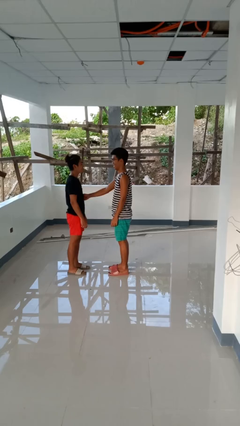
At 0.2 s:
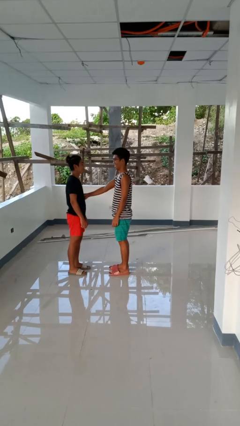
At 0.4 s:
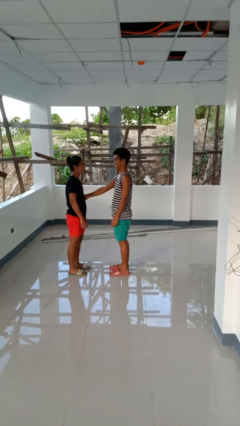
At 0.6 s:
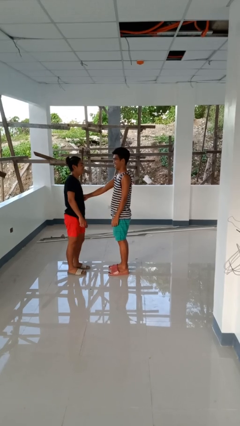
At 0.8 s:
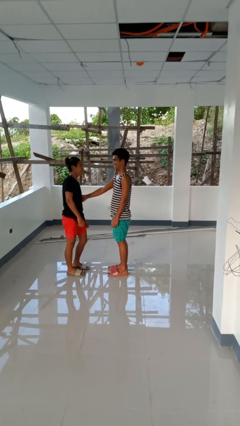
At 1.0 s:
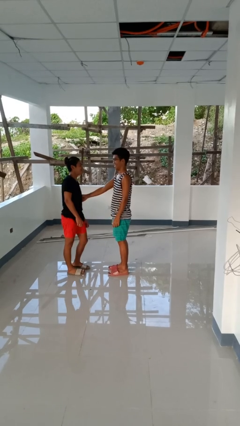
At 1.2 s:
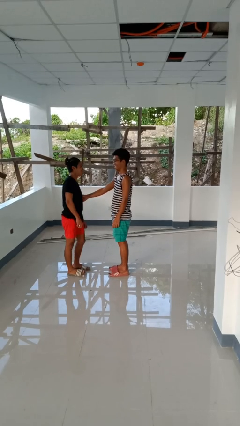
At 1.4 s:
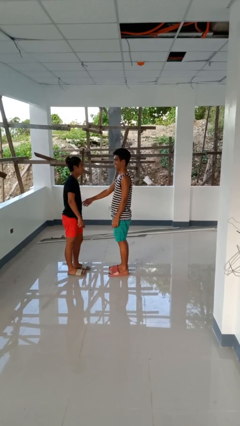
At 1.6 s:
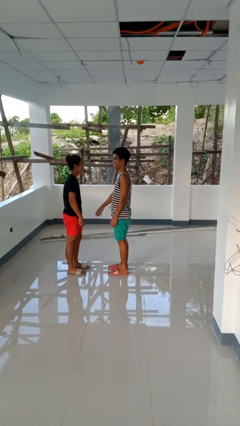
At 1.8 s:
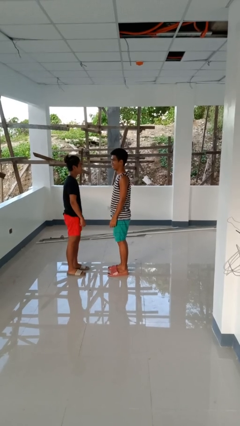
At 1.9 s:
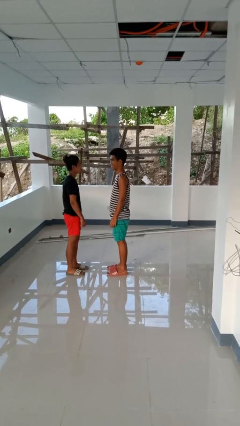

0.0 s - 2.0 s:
person tickles person

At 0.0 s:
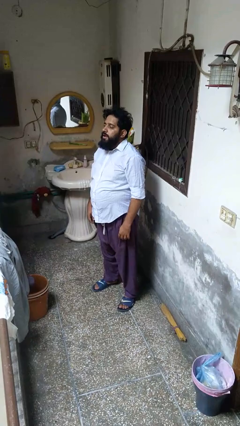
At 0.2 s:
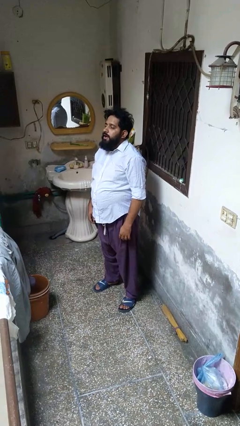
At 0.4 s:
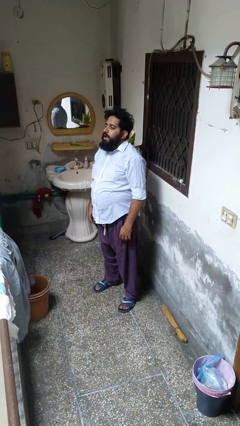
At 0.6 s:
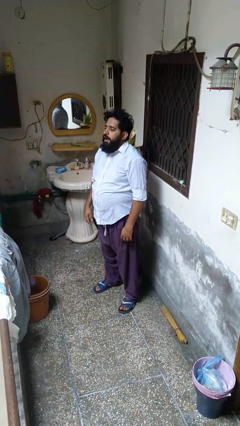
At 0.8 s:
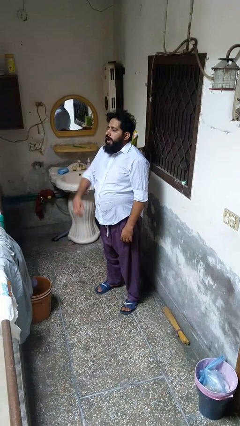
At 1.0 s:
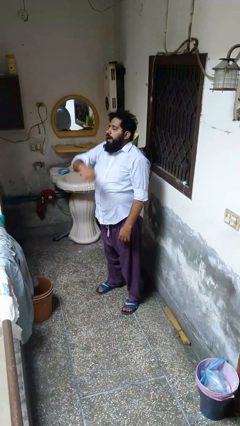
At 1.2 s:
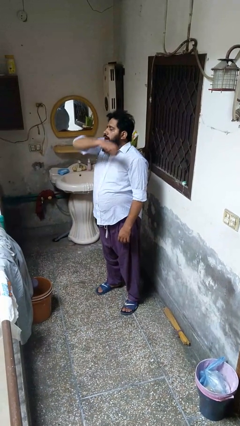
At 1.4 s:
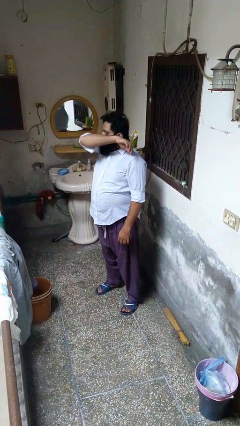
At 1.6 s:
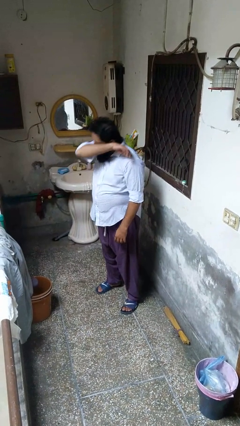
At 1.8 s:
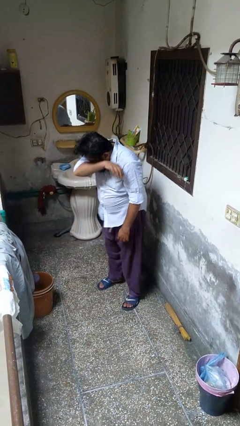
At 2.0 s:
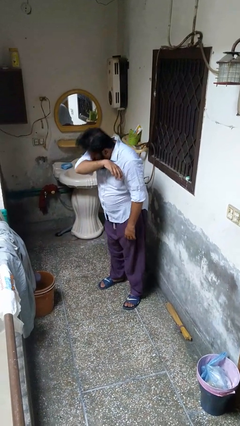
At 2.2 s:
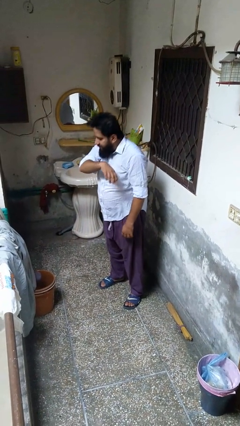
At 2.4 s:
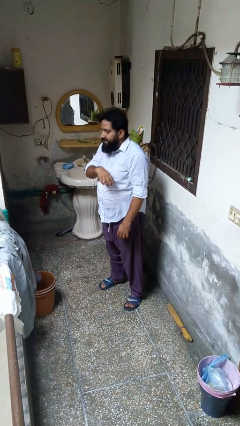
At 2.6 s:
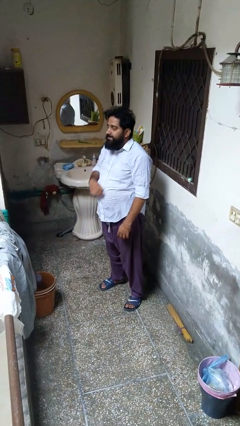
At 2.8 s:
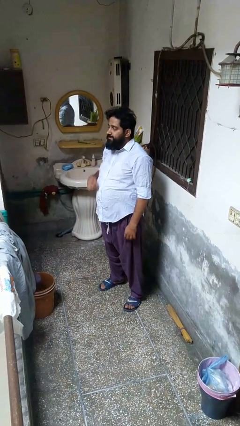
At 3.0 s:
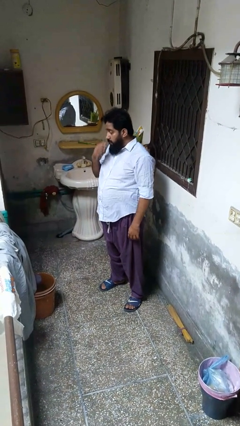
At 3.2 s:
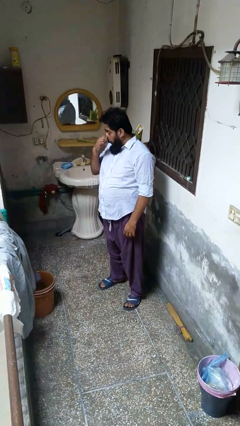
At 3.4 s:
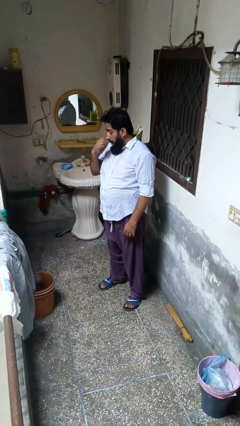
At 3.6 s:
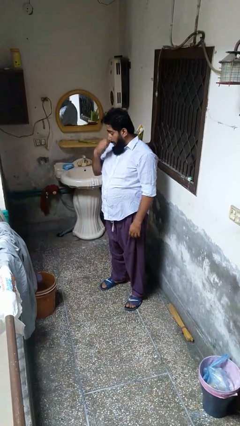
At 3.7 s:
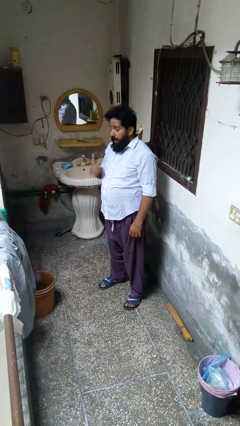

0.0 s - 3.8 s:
person sneezes into arm

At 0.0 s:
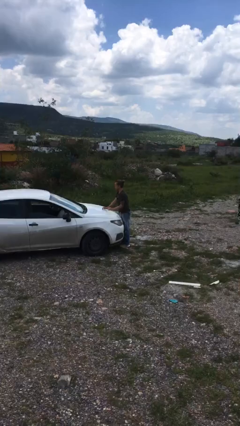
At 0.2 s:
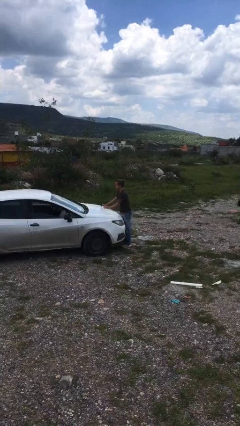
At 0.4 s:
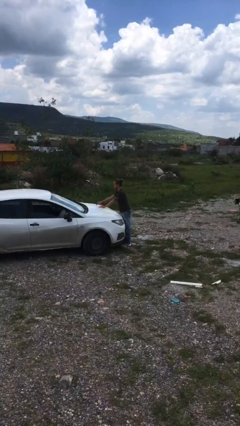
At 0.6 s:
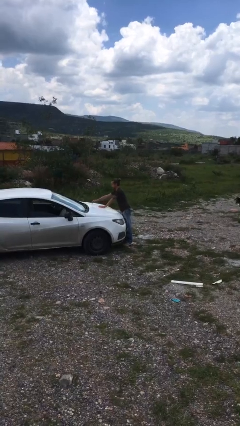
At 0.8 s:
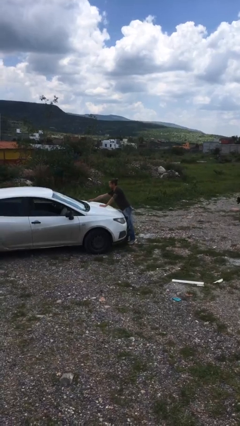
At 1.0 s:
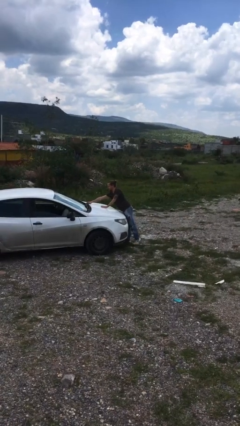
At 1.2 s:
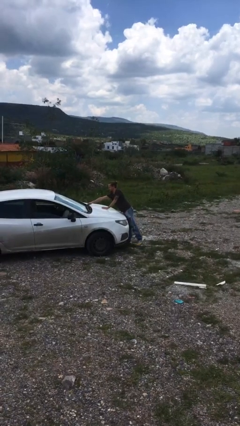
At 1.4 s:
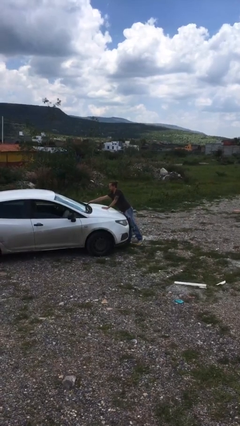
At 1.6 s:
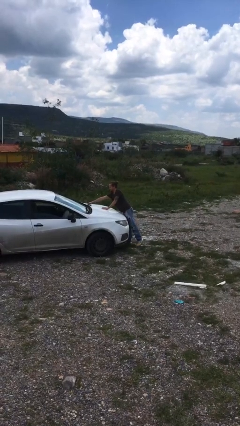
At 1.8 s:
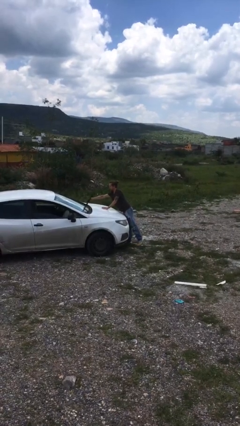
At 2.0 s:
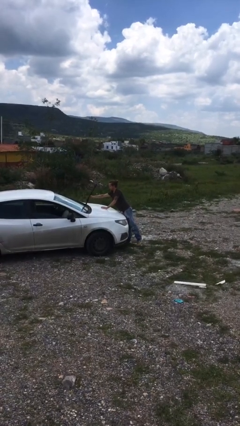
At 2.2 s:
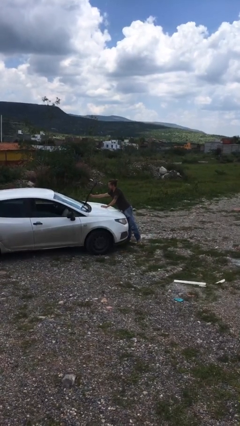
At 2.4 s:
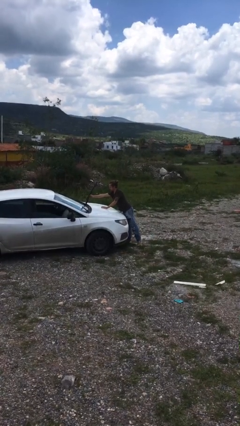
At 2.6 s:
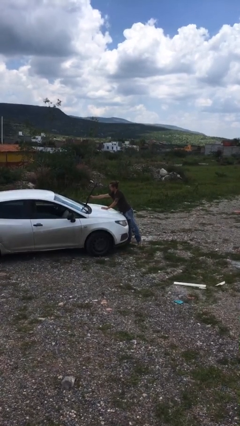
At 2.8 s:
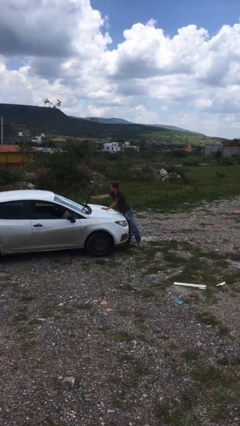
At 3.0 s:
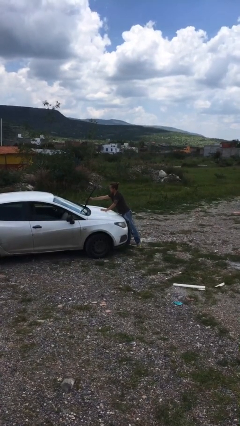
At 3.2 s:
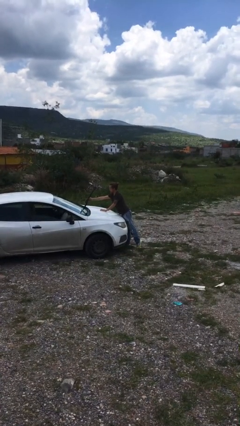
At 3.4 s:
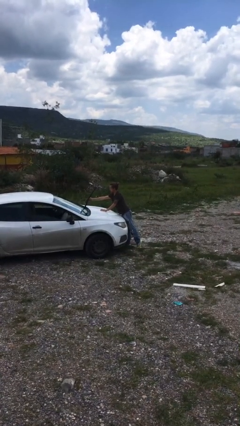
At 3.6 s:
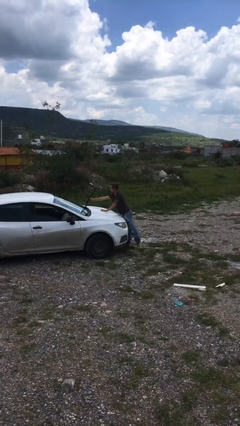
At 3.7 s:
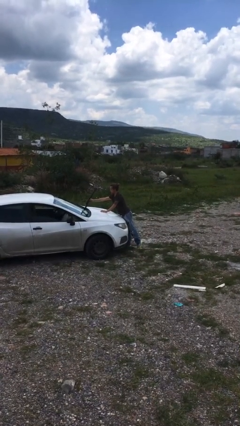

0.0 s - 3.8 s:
person flips up car wipers

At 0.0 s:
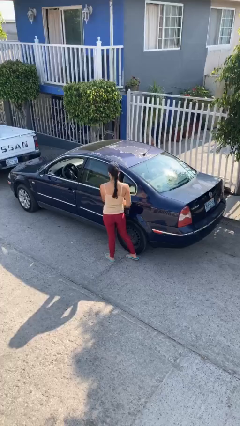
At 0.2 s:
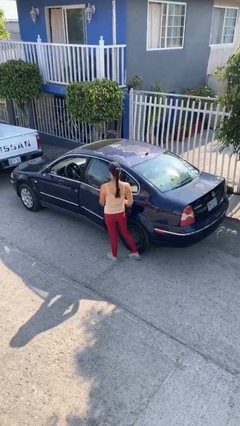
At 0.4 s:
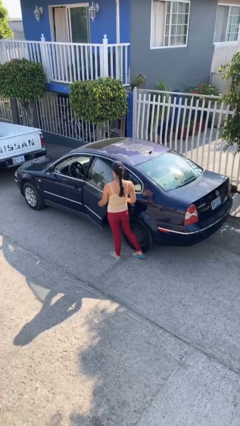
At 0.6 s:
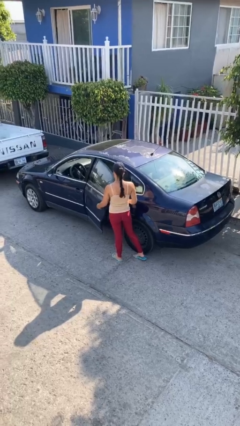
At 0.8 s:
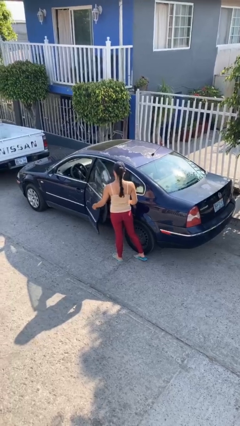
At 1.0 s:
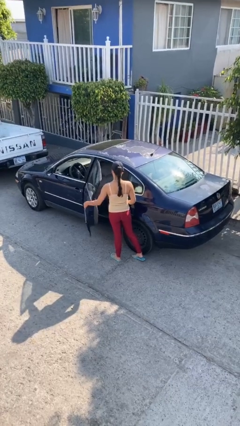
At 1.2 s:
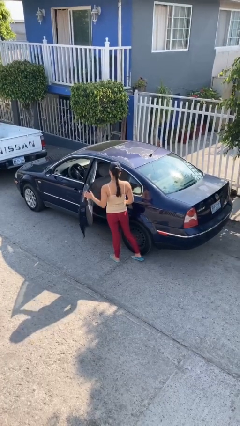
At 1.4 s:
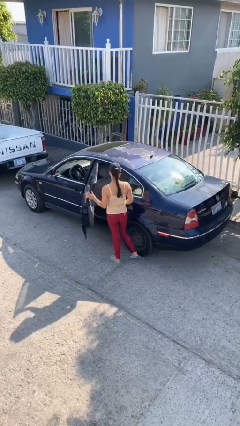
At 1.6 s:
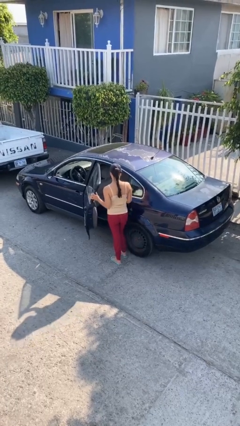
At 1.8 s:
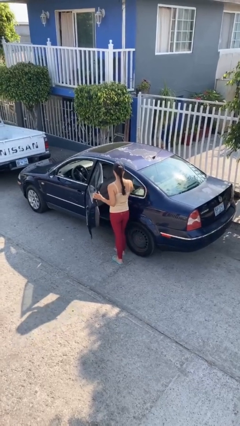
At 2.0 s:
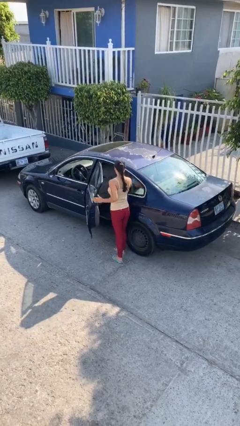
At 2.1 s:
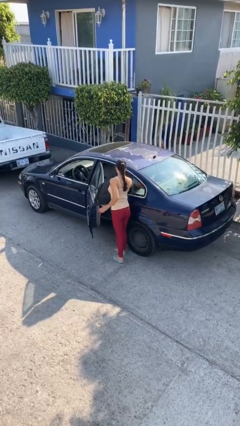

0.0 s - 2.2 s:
person opens car door

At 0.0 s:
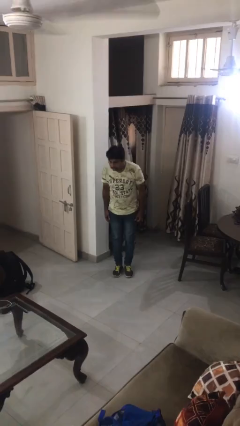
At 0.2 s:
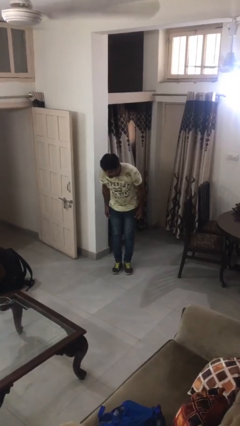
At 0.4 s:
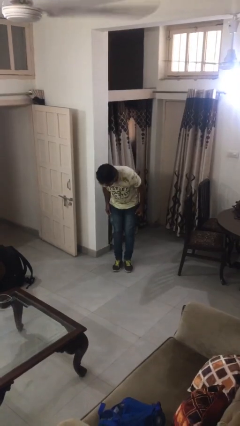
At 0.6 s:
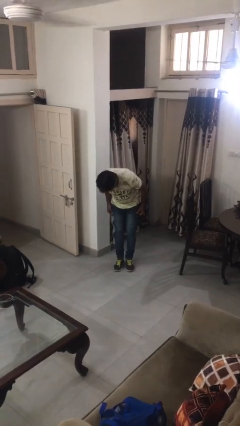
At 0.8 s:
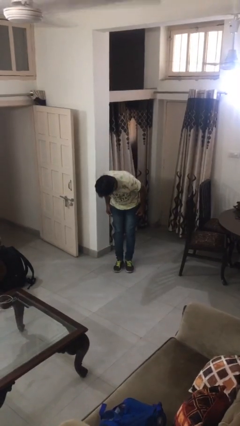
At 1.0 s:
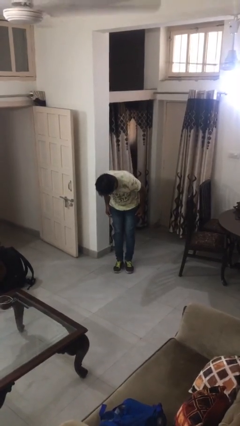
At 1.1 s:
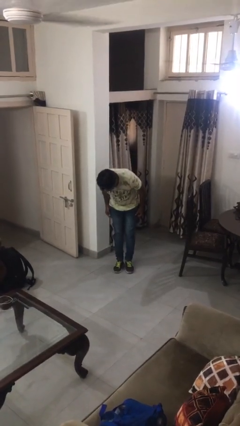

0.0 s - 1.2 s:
person bows

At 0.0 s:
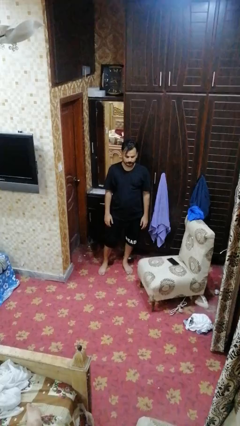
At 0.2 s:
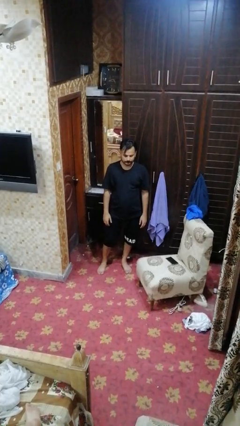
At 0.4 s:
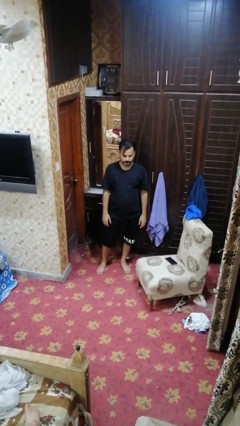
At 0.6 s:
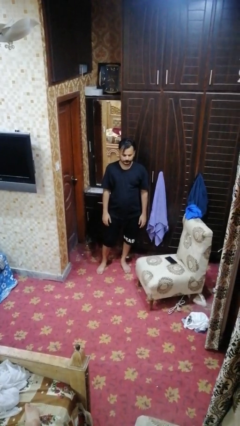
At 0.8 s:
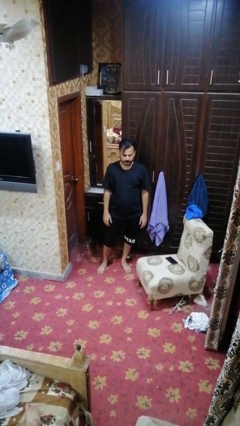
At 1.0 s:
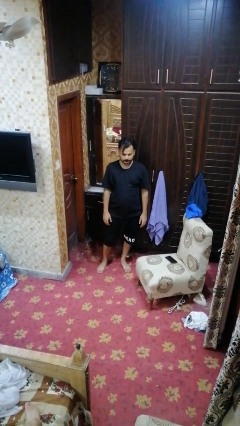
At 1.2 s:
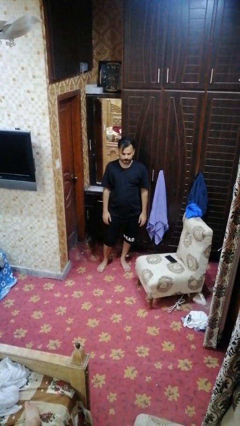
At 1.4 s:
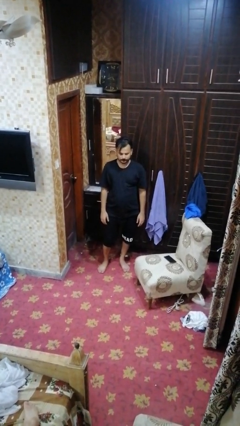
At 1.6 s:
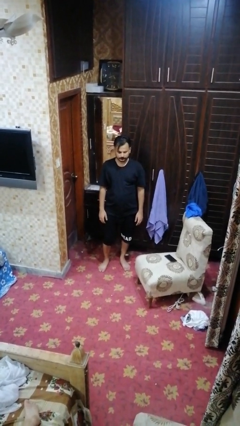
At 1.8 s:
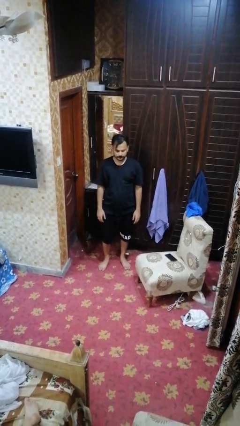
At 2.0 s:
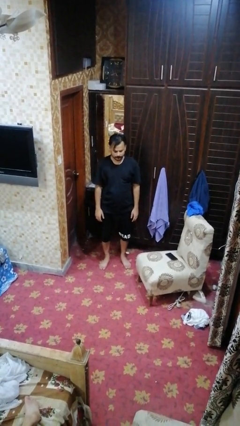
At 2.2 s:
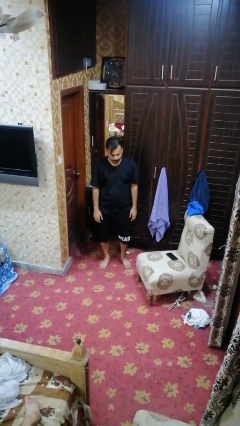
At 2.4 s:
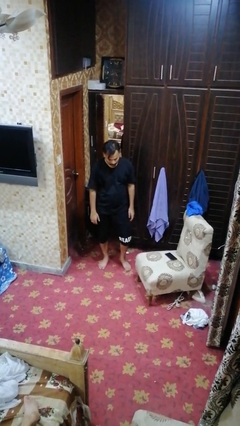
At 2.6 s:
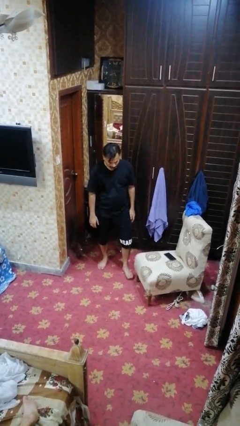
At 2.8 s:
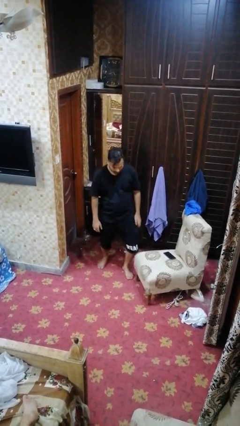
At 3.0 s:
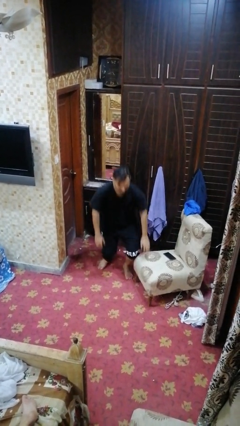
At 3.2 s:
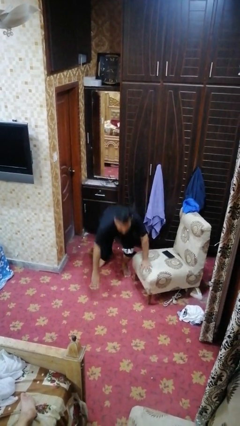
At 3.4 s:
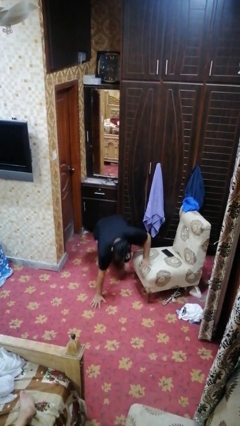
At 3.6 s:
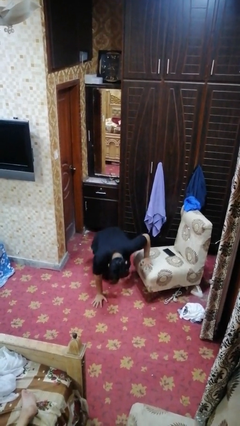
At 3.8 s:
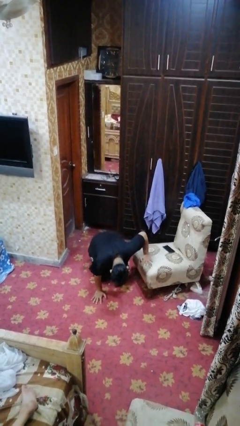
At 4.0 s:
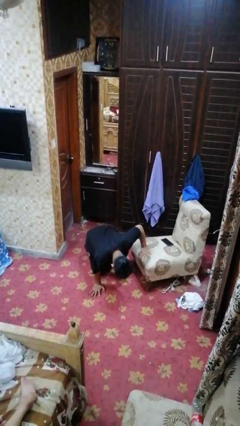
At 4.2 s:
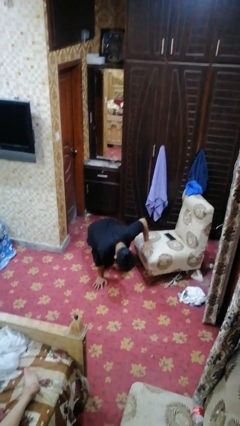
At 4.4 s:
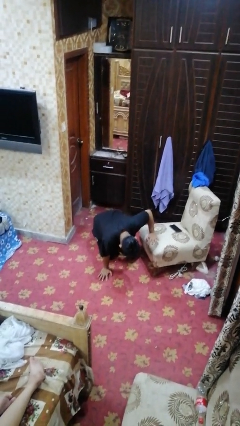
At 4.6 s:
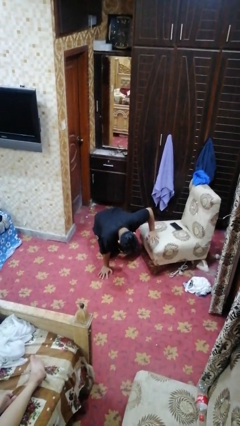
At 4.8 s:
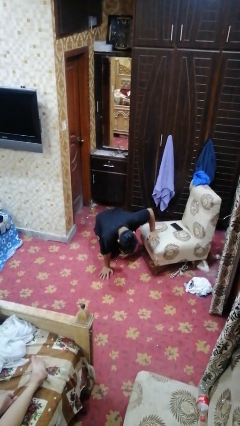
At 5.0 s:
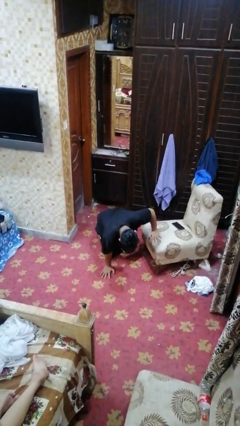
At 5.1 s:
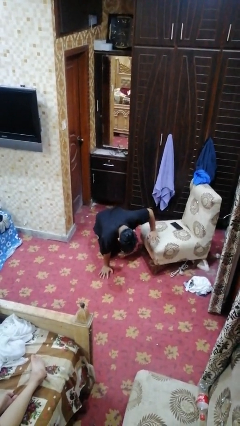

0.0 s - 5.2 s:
person trips on object on floor
